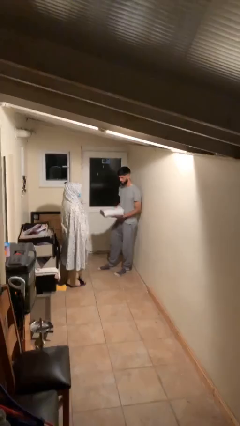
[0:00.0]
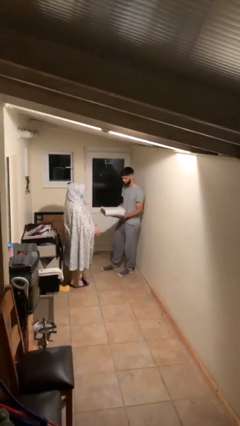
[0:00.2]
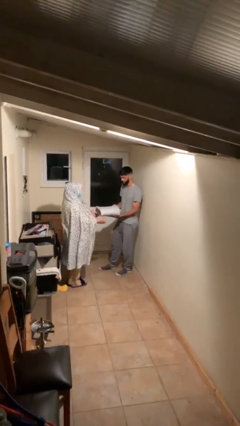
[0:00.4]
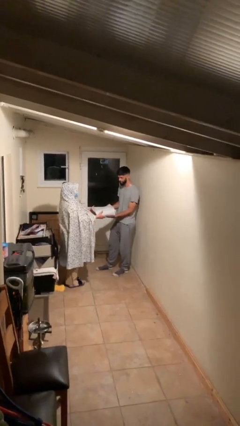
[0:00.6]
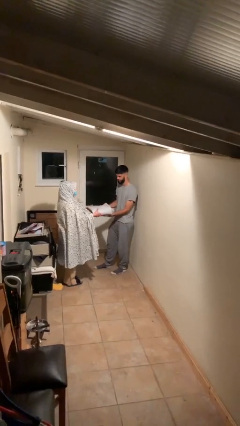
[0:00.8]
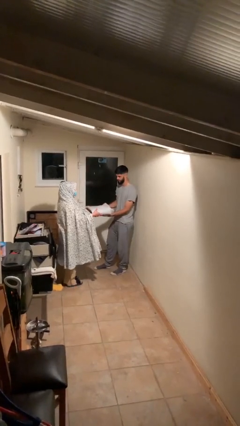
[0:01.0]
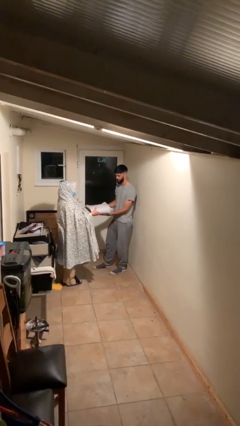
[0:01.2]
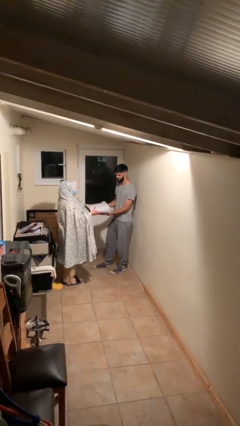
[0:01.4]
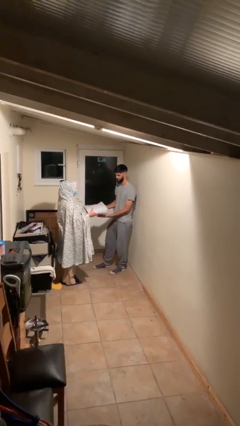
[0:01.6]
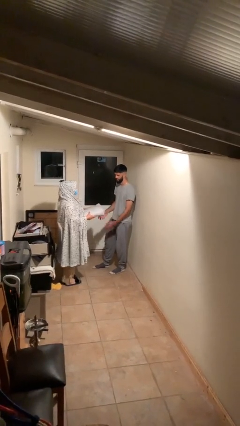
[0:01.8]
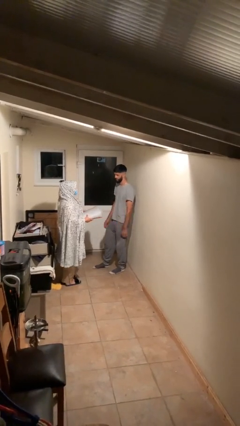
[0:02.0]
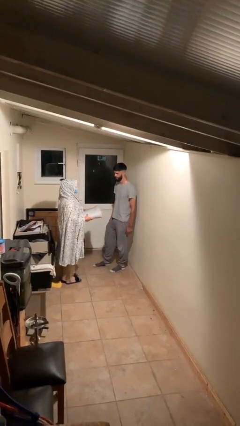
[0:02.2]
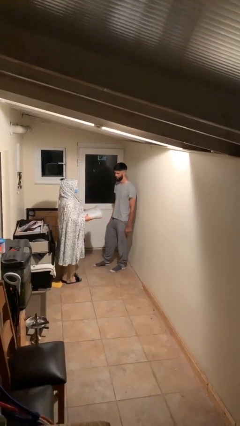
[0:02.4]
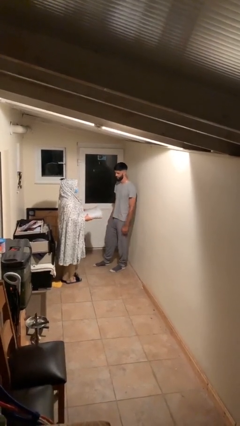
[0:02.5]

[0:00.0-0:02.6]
person transfers object to person

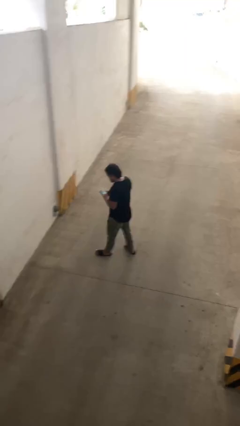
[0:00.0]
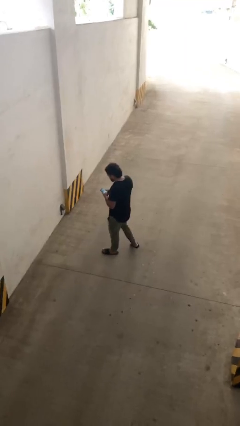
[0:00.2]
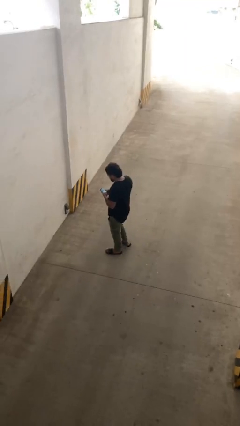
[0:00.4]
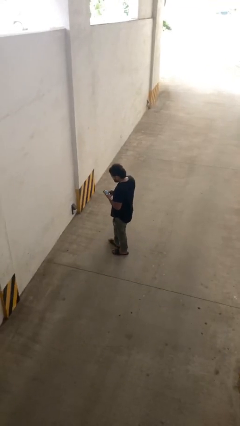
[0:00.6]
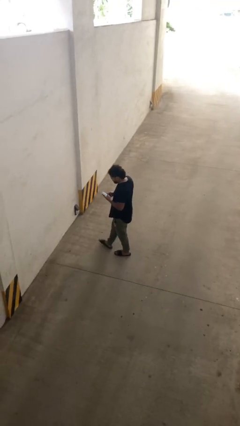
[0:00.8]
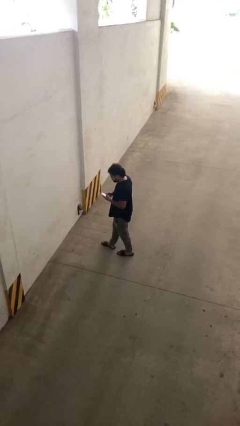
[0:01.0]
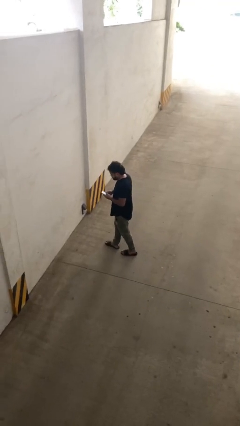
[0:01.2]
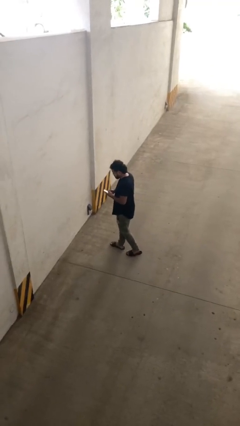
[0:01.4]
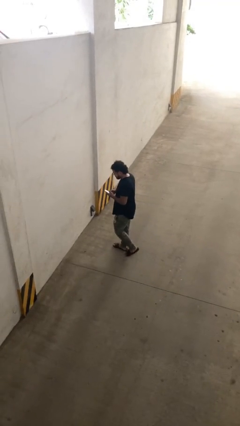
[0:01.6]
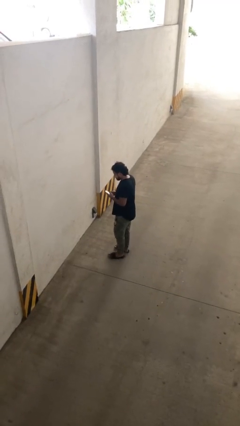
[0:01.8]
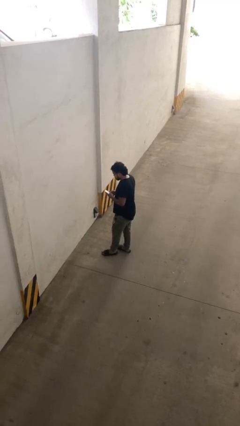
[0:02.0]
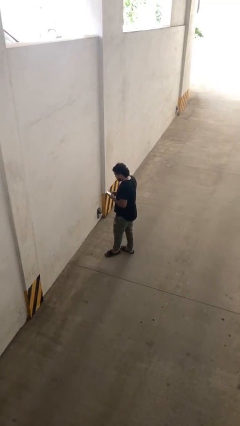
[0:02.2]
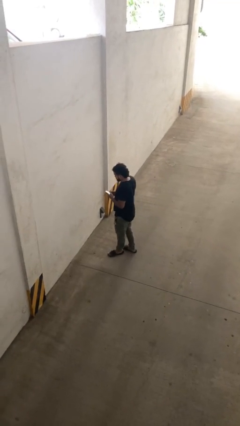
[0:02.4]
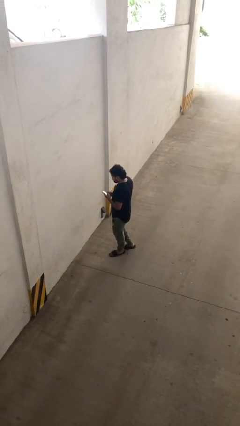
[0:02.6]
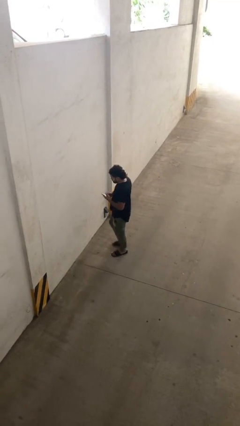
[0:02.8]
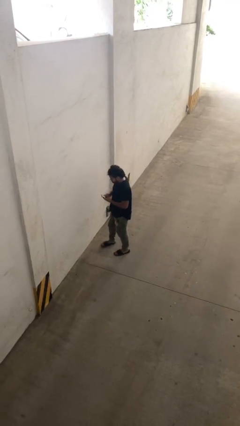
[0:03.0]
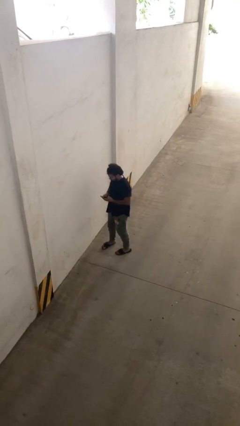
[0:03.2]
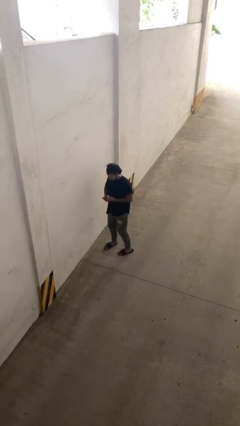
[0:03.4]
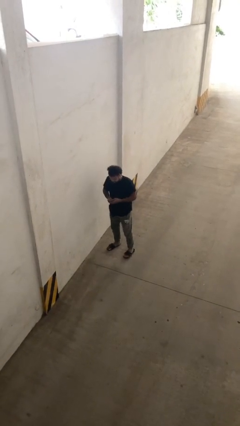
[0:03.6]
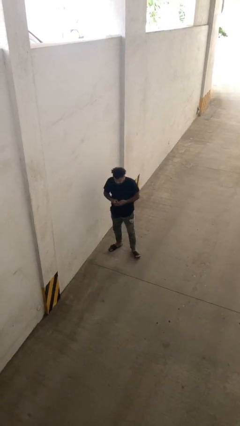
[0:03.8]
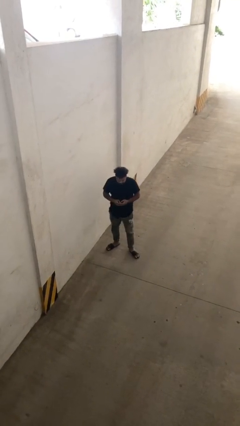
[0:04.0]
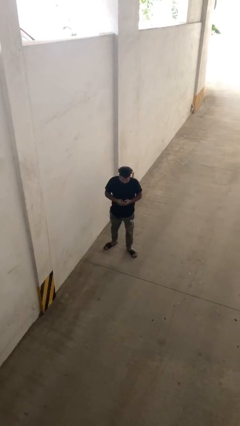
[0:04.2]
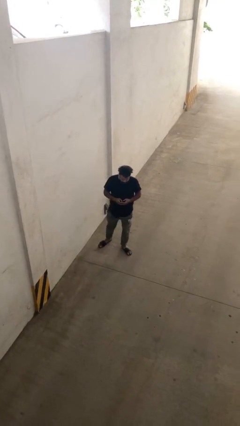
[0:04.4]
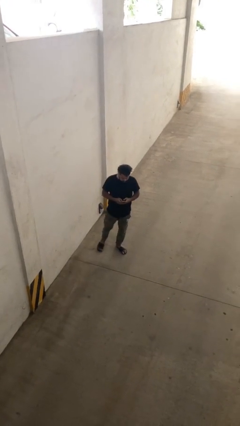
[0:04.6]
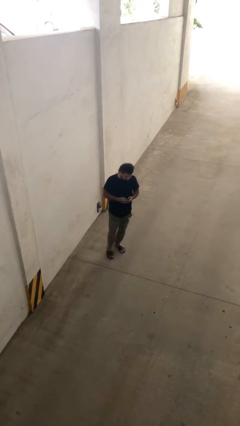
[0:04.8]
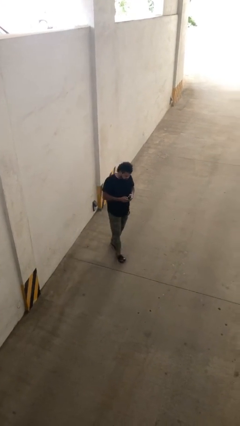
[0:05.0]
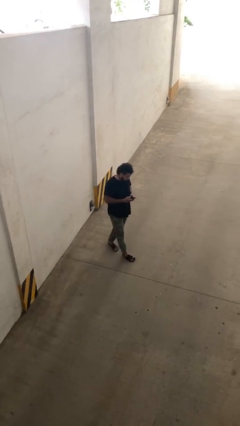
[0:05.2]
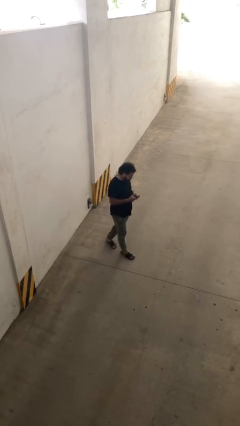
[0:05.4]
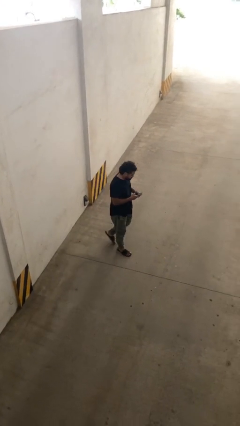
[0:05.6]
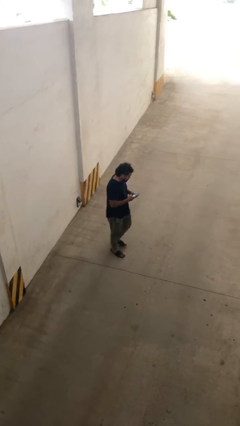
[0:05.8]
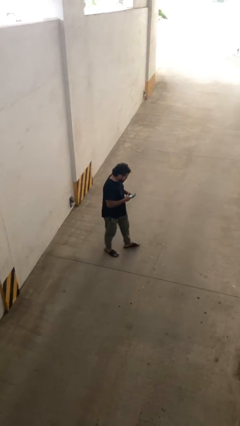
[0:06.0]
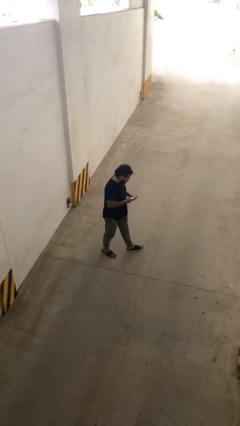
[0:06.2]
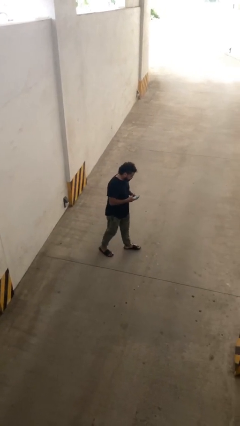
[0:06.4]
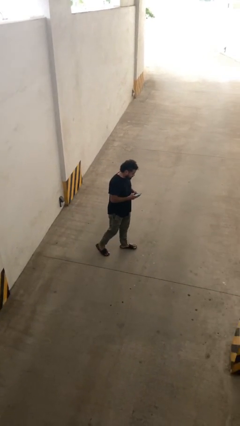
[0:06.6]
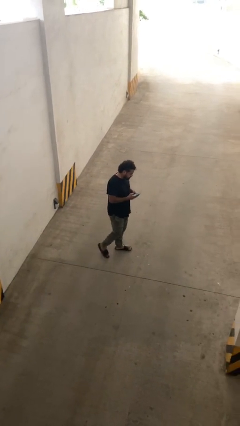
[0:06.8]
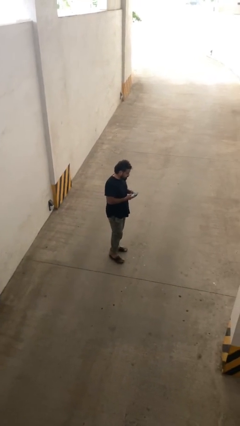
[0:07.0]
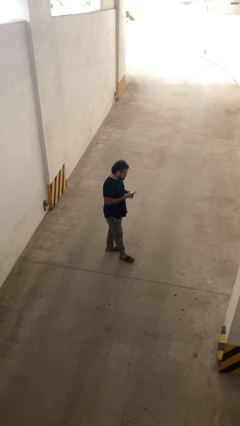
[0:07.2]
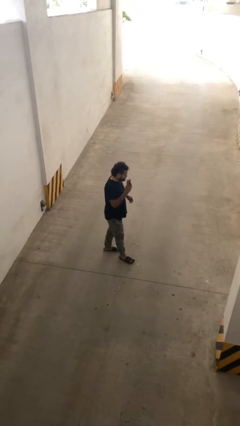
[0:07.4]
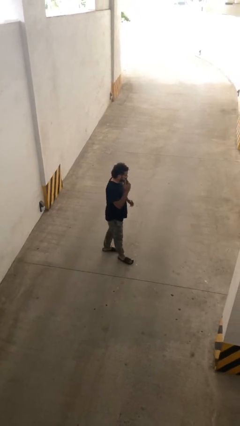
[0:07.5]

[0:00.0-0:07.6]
person texts on phone

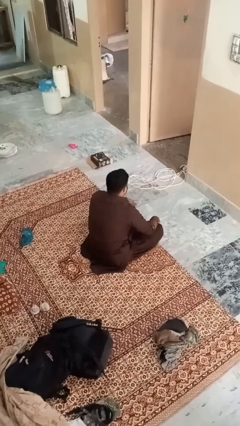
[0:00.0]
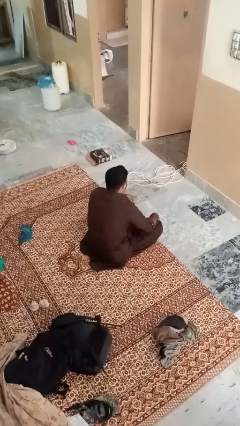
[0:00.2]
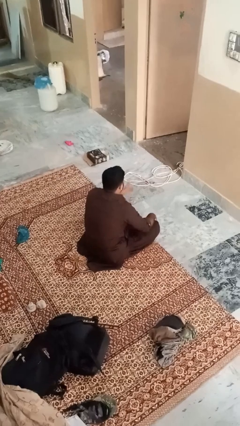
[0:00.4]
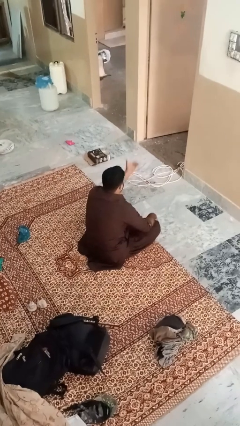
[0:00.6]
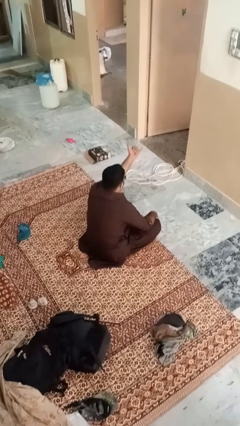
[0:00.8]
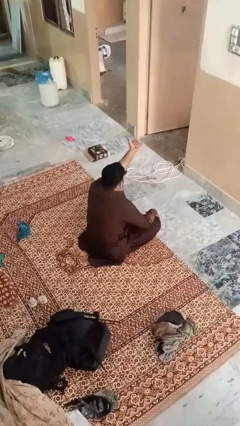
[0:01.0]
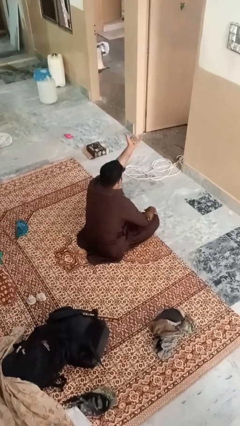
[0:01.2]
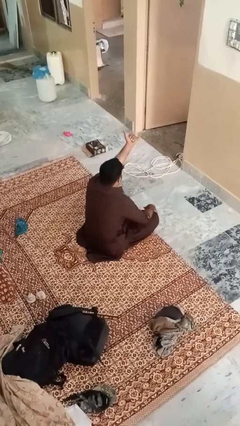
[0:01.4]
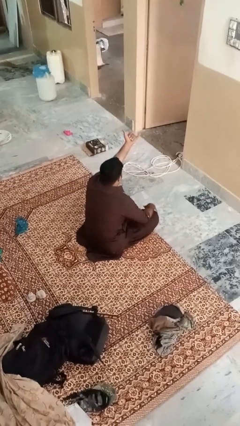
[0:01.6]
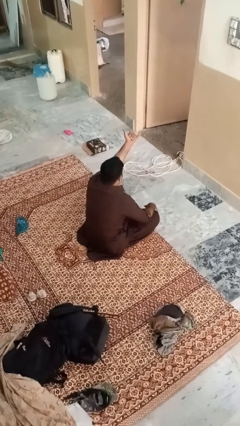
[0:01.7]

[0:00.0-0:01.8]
person gestures hang loose

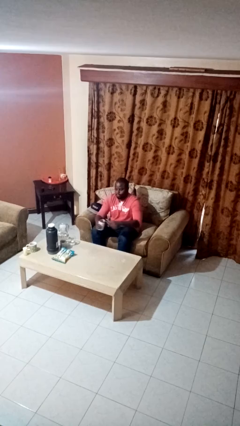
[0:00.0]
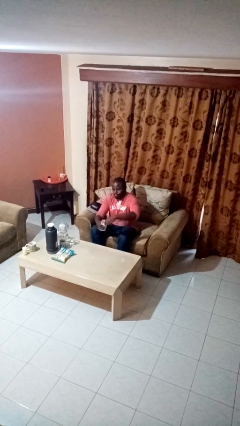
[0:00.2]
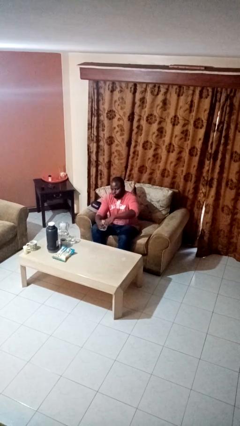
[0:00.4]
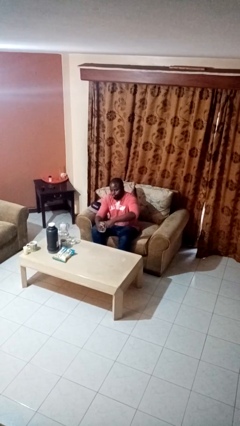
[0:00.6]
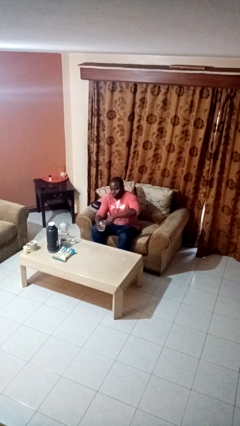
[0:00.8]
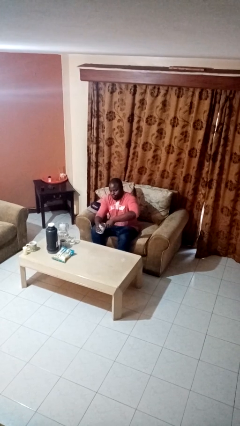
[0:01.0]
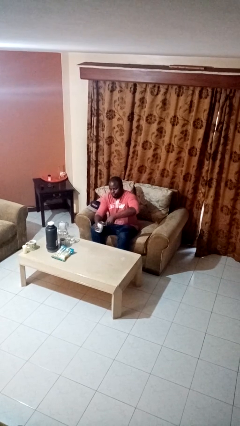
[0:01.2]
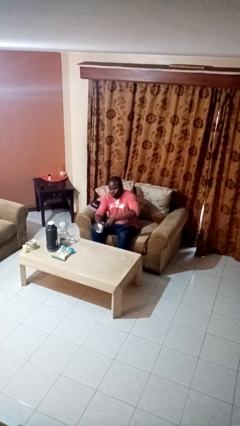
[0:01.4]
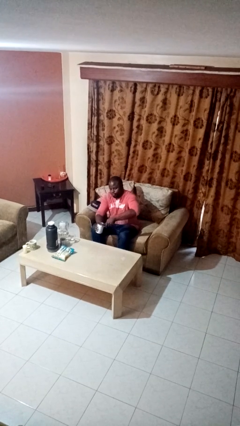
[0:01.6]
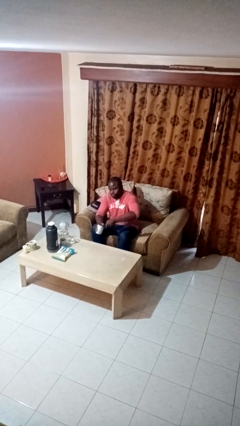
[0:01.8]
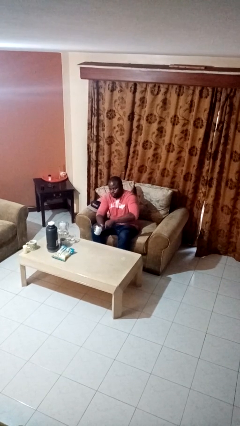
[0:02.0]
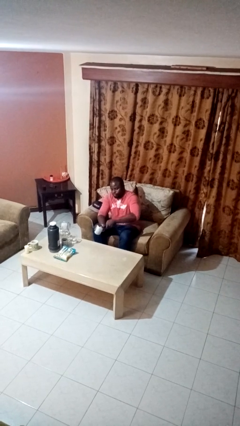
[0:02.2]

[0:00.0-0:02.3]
person opens can with can opener

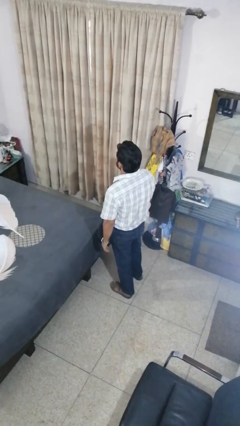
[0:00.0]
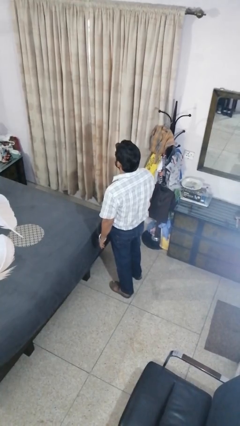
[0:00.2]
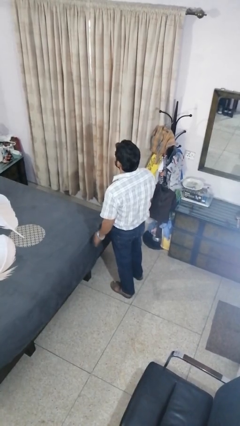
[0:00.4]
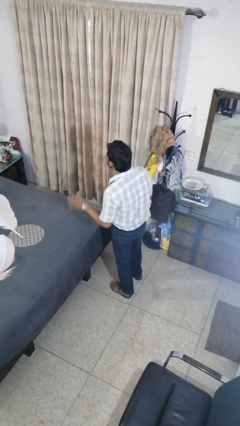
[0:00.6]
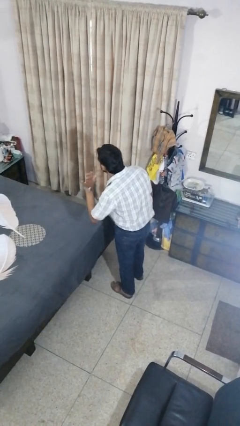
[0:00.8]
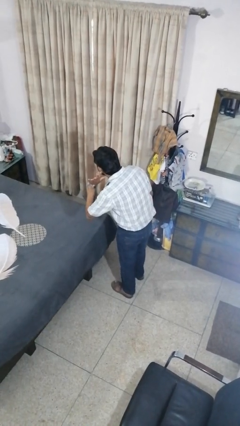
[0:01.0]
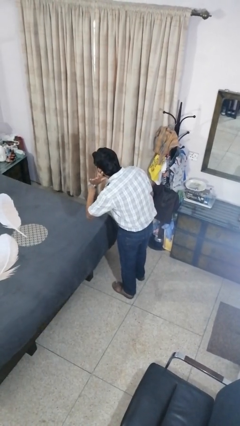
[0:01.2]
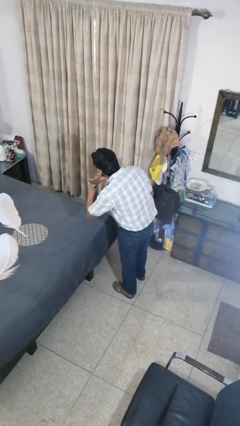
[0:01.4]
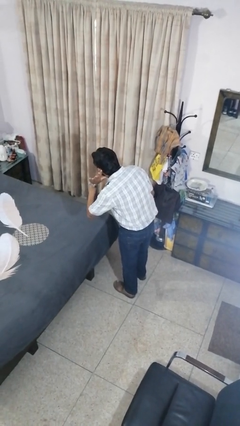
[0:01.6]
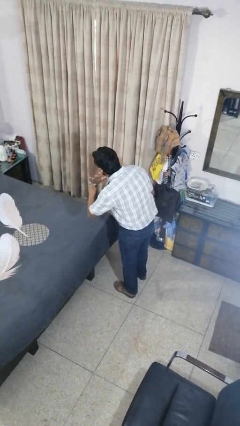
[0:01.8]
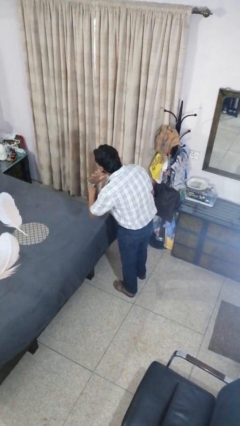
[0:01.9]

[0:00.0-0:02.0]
person gestures listen closely

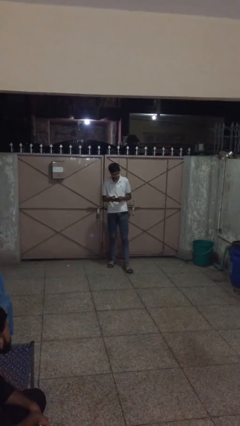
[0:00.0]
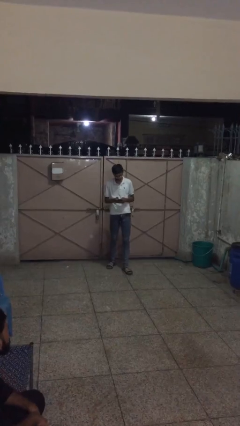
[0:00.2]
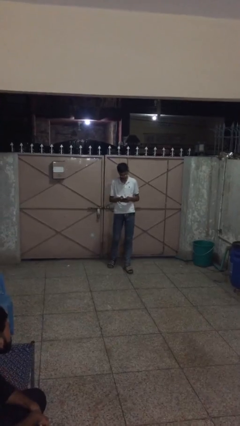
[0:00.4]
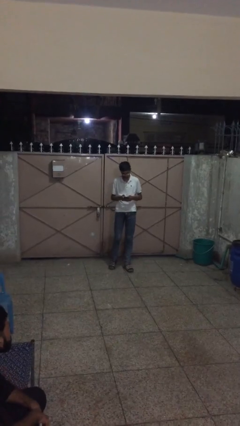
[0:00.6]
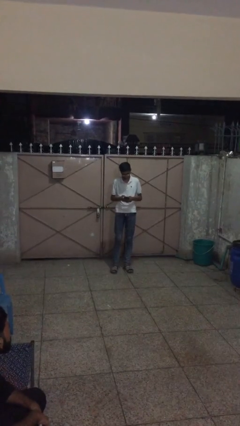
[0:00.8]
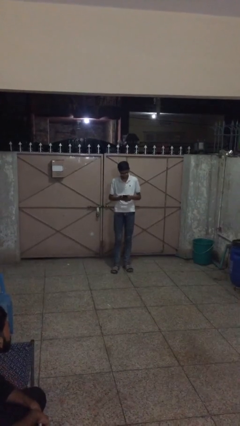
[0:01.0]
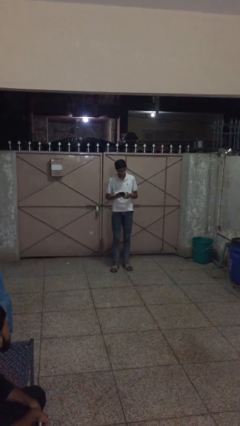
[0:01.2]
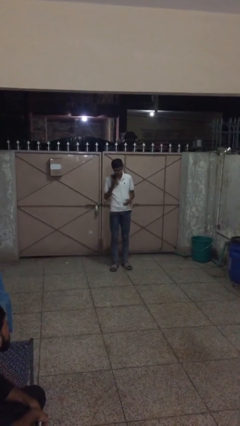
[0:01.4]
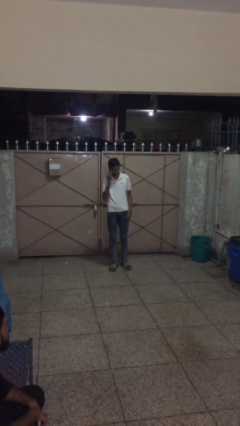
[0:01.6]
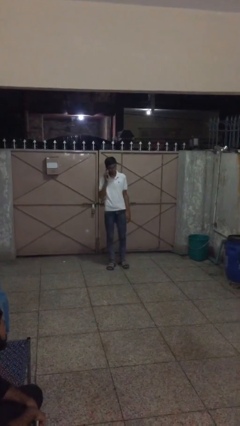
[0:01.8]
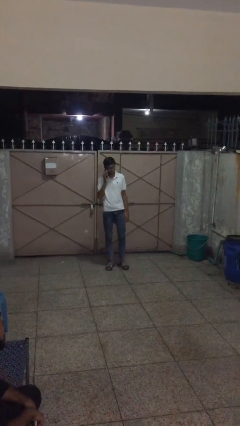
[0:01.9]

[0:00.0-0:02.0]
person talks on phone
